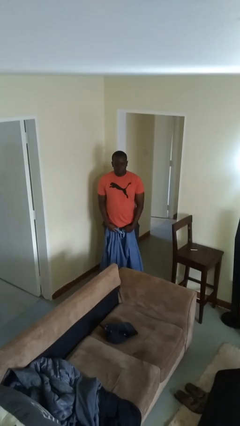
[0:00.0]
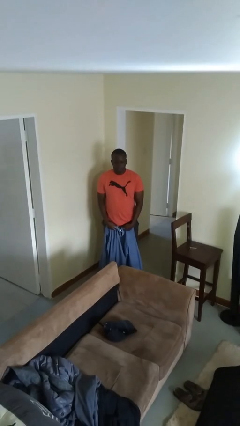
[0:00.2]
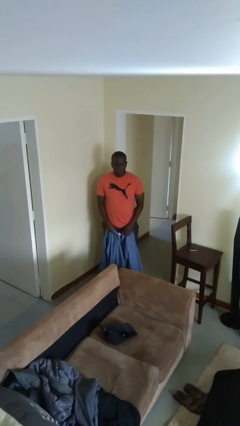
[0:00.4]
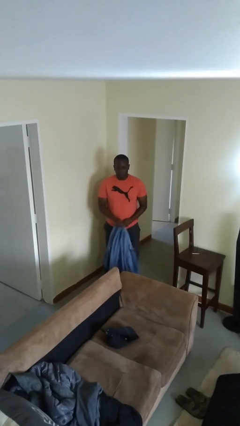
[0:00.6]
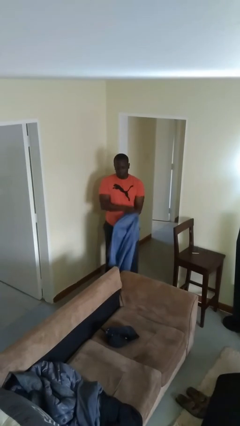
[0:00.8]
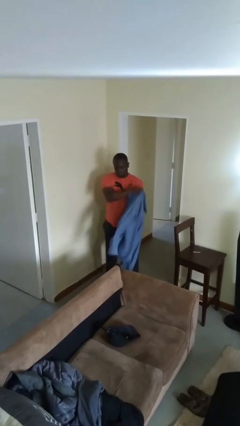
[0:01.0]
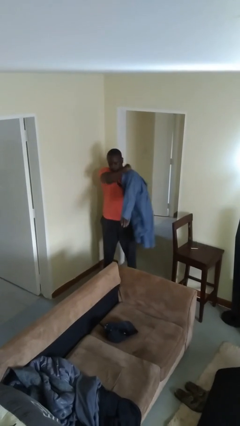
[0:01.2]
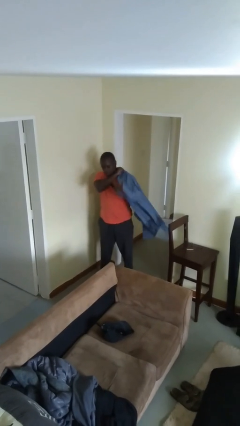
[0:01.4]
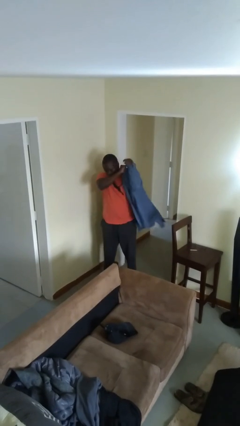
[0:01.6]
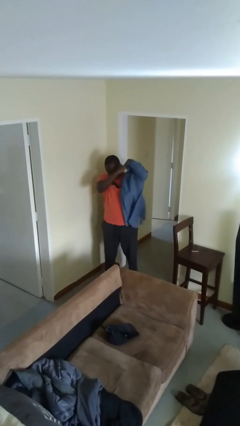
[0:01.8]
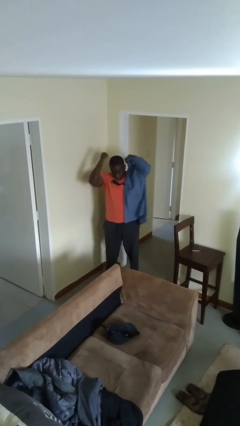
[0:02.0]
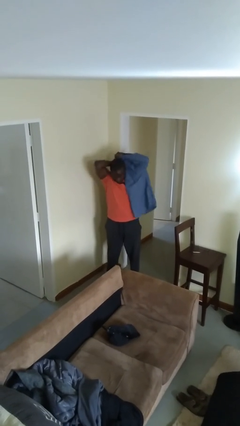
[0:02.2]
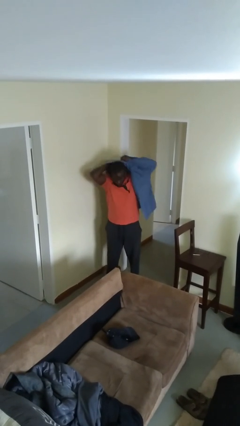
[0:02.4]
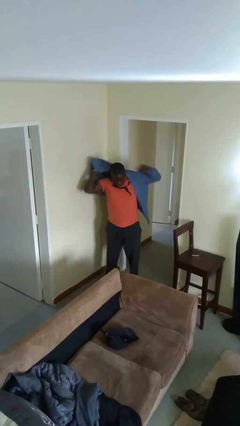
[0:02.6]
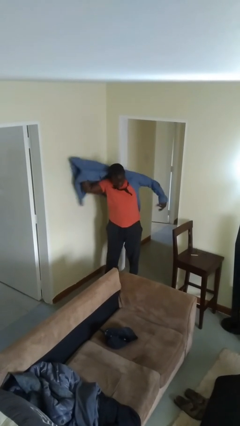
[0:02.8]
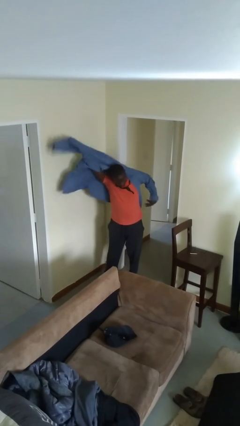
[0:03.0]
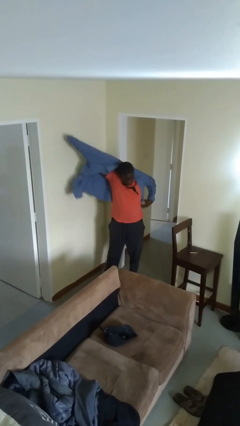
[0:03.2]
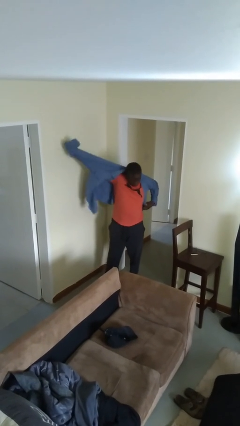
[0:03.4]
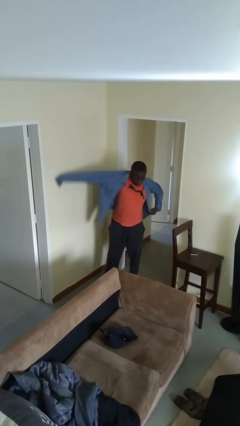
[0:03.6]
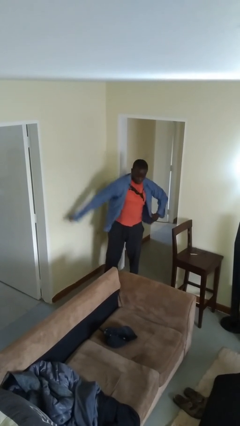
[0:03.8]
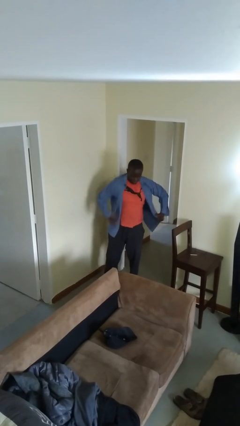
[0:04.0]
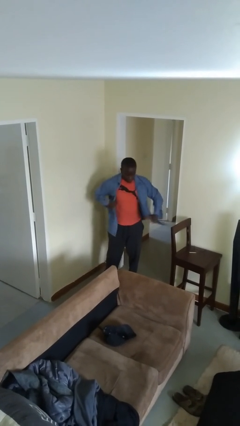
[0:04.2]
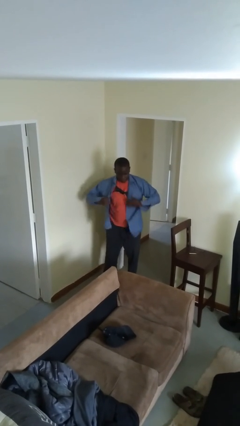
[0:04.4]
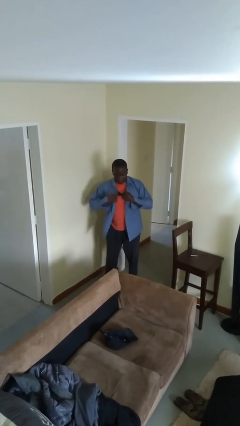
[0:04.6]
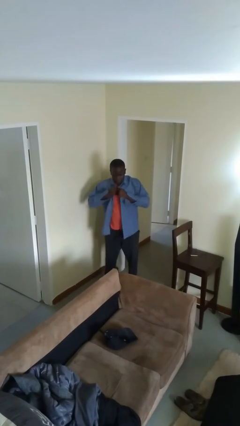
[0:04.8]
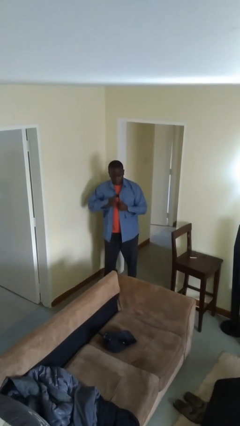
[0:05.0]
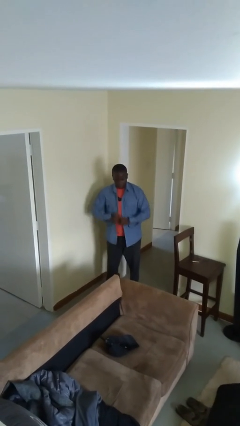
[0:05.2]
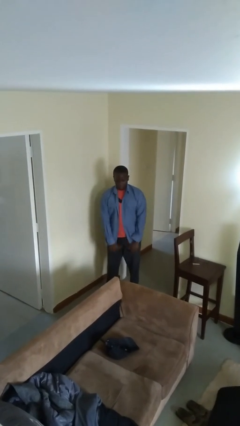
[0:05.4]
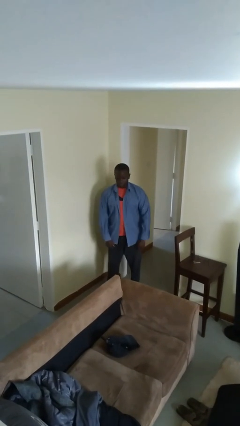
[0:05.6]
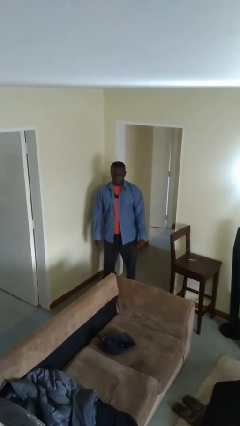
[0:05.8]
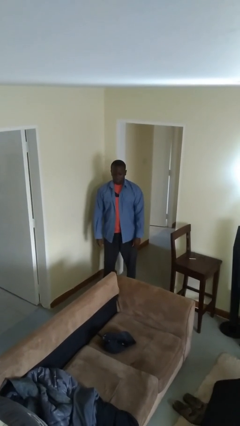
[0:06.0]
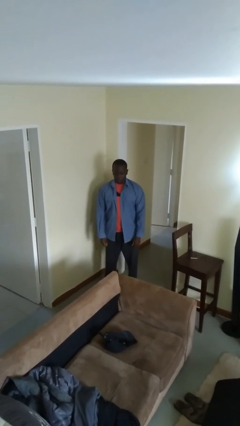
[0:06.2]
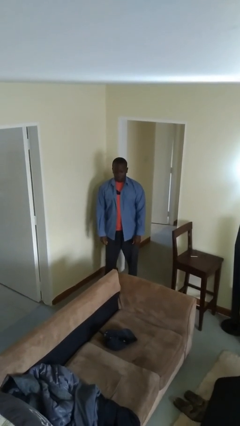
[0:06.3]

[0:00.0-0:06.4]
person puts on shirt

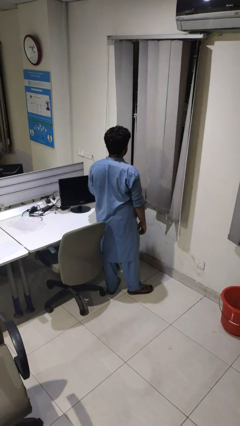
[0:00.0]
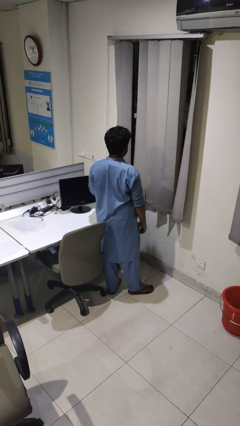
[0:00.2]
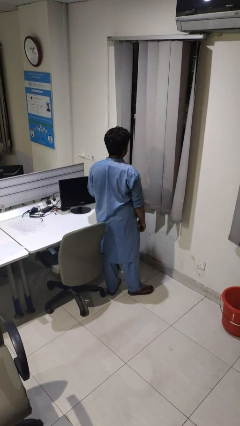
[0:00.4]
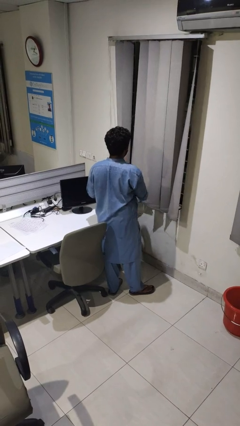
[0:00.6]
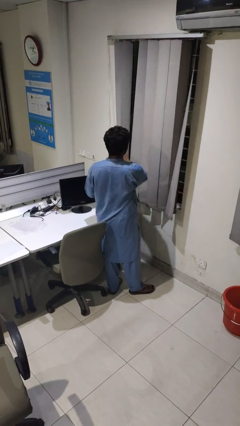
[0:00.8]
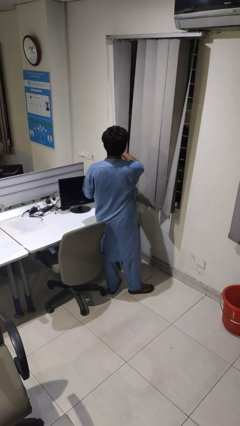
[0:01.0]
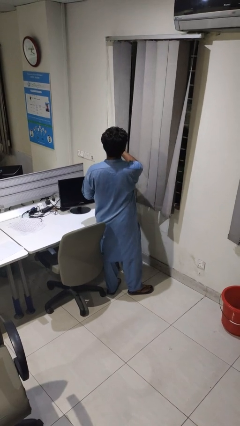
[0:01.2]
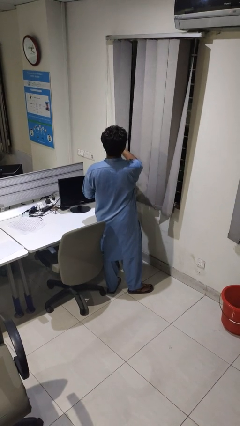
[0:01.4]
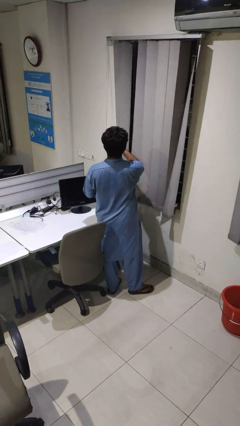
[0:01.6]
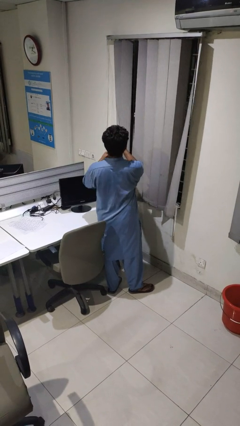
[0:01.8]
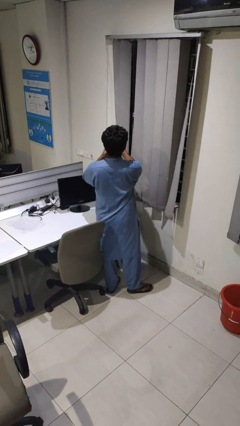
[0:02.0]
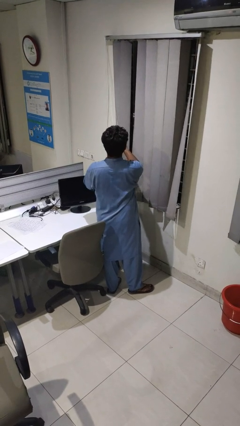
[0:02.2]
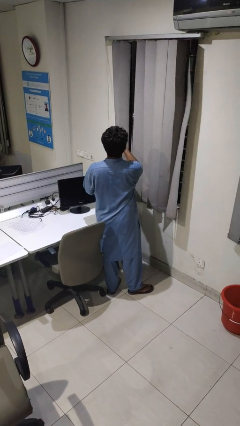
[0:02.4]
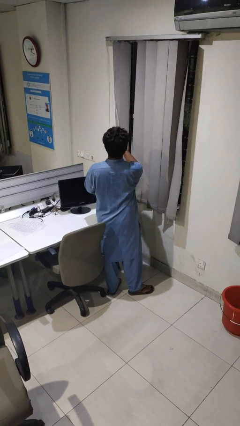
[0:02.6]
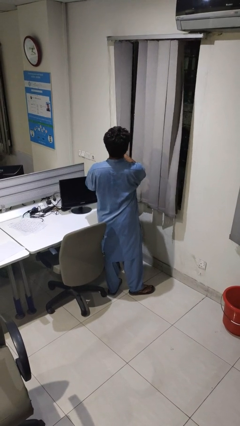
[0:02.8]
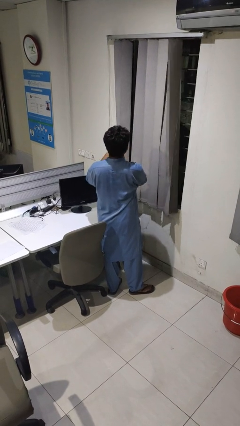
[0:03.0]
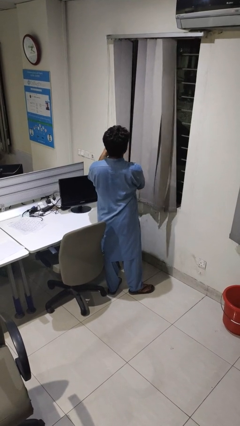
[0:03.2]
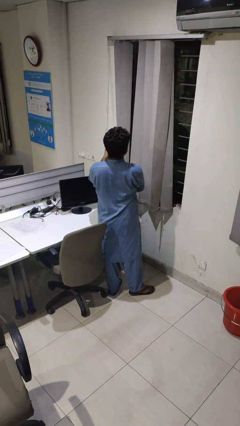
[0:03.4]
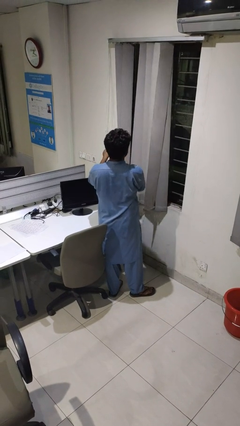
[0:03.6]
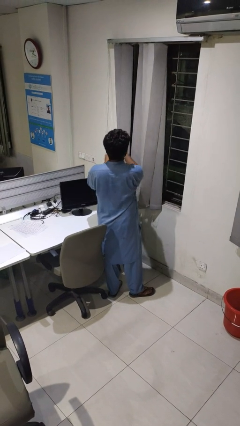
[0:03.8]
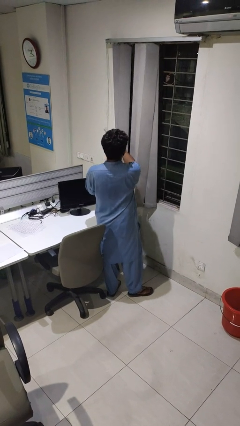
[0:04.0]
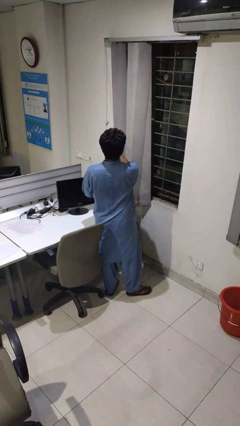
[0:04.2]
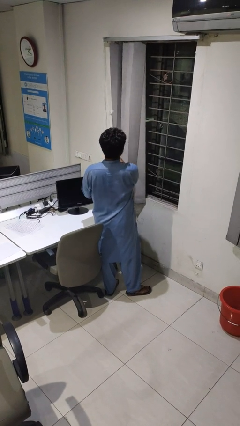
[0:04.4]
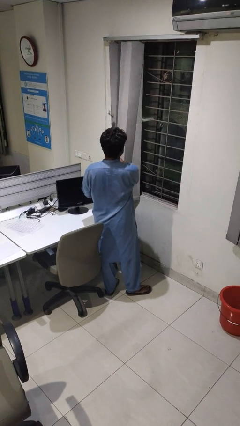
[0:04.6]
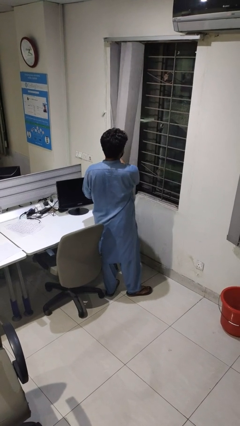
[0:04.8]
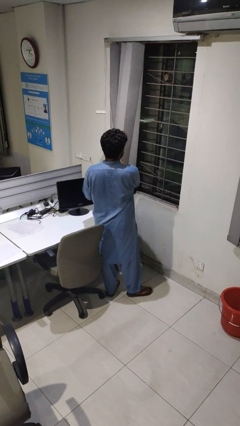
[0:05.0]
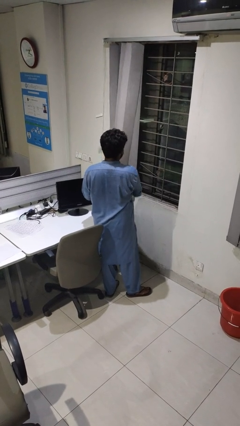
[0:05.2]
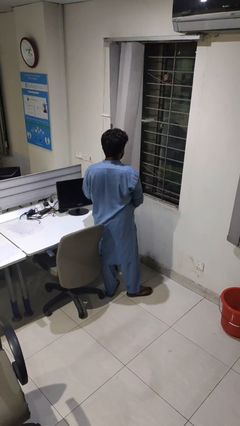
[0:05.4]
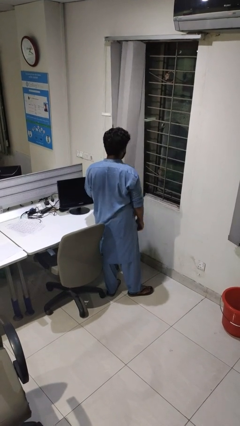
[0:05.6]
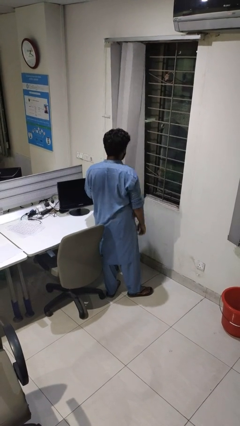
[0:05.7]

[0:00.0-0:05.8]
person opens curtains

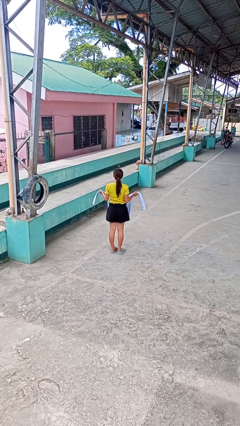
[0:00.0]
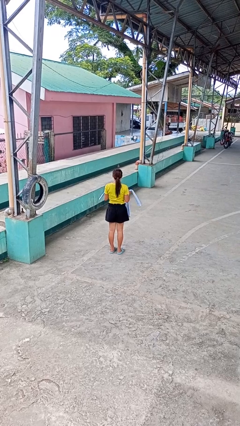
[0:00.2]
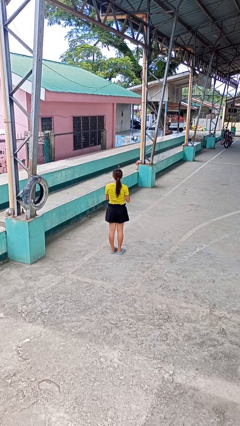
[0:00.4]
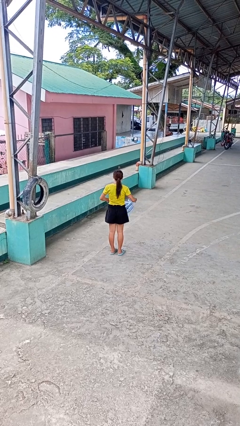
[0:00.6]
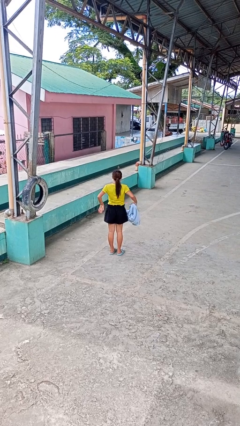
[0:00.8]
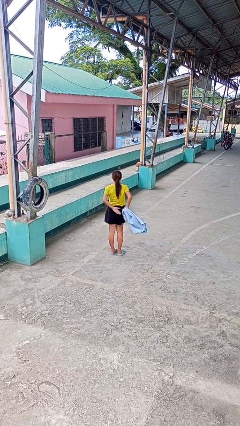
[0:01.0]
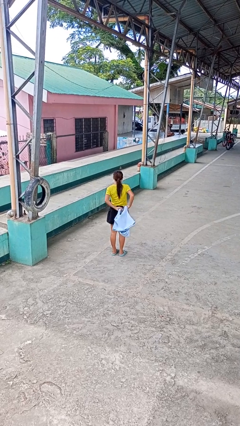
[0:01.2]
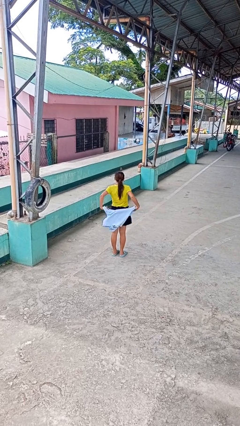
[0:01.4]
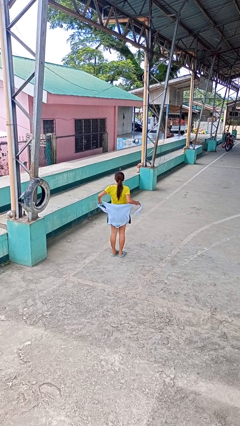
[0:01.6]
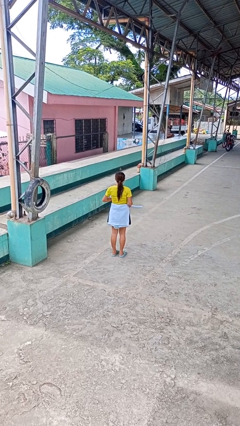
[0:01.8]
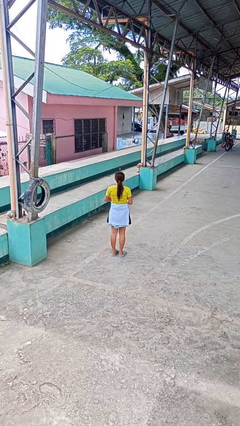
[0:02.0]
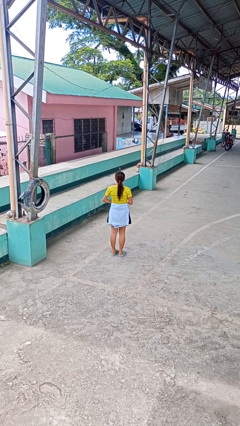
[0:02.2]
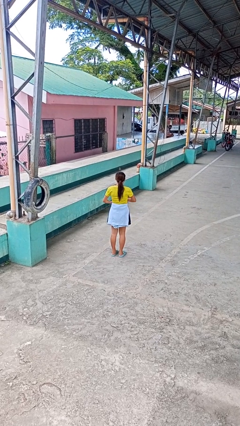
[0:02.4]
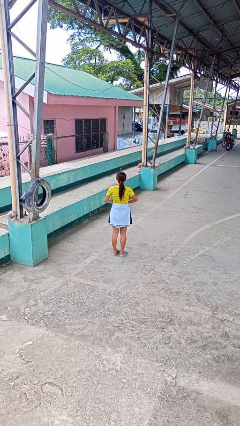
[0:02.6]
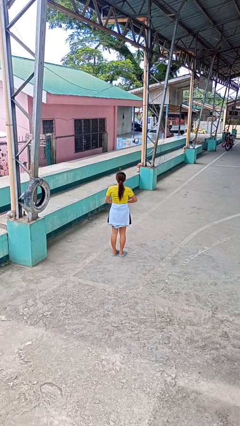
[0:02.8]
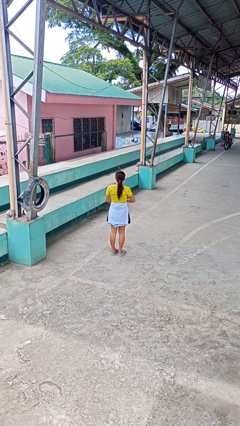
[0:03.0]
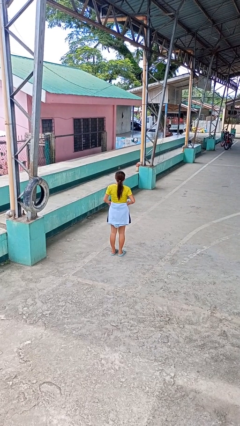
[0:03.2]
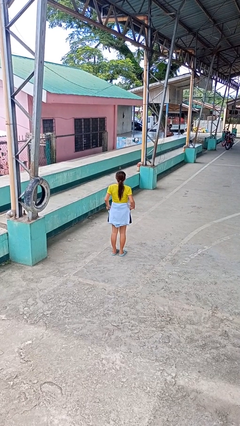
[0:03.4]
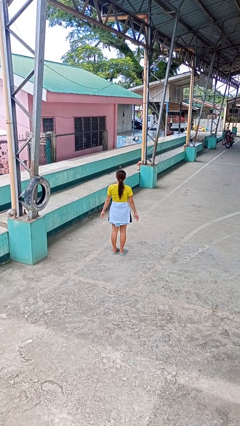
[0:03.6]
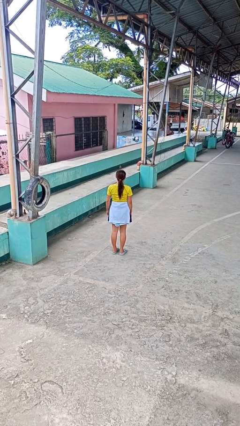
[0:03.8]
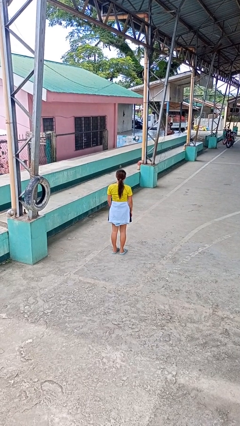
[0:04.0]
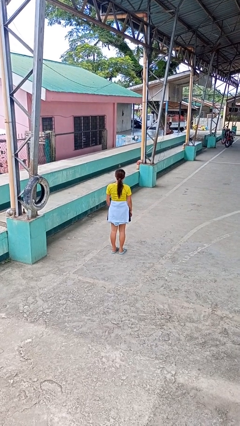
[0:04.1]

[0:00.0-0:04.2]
person ties jacket around waist

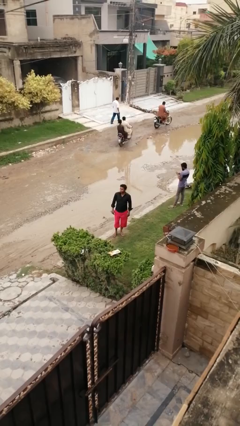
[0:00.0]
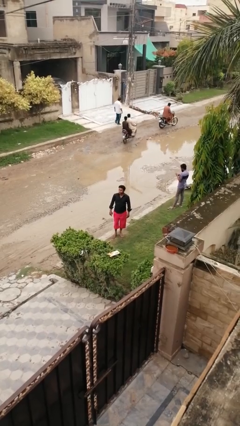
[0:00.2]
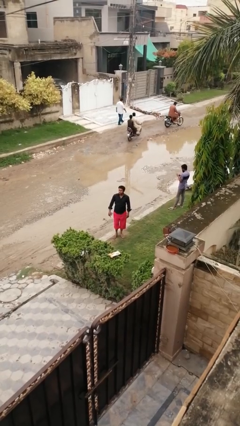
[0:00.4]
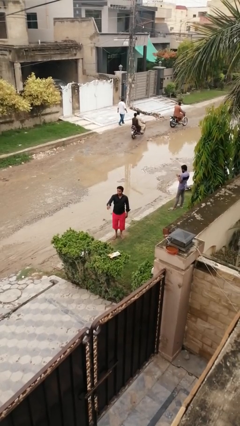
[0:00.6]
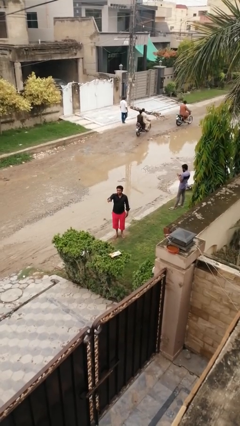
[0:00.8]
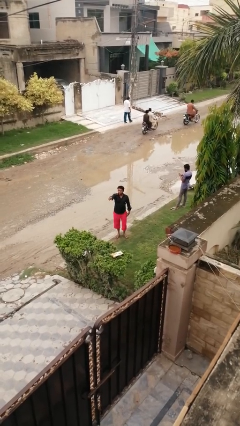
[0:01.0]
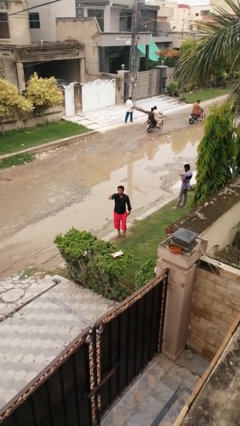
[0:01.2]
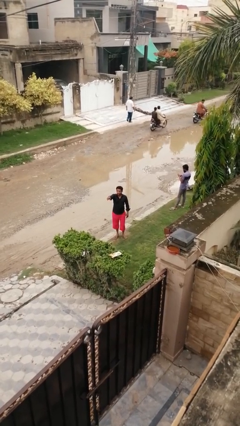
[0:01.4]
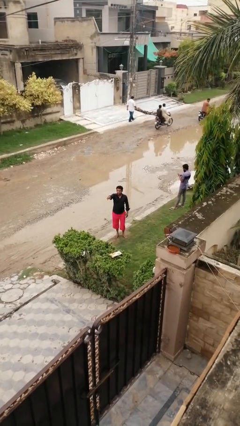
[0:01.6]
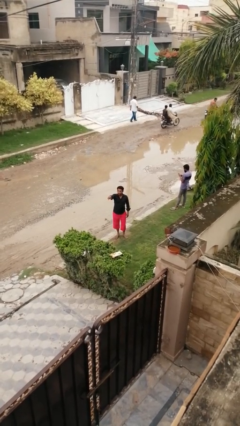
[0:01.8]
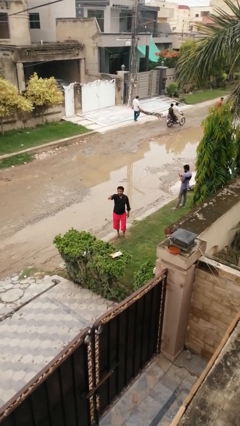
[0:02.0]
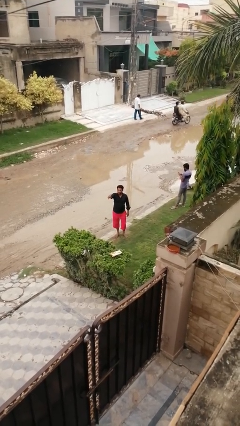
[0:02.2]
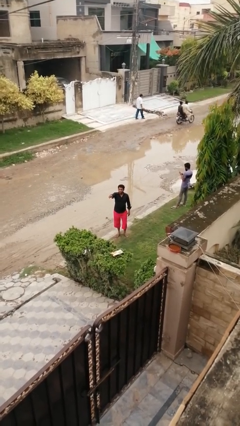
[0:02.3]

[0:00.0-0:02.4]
person points at person
